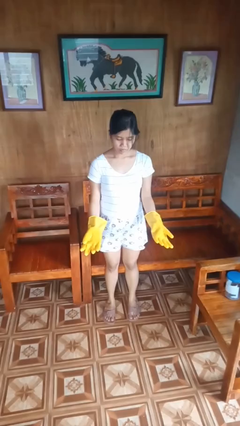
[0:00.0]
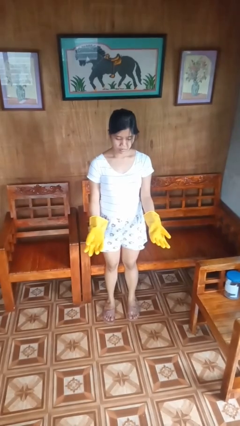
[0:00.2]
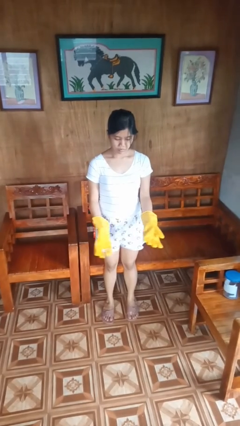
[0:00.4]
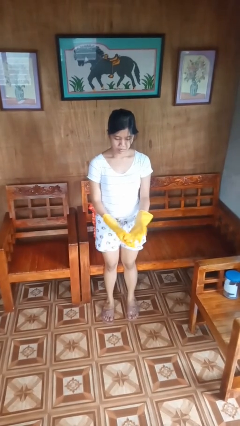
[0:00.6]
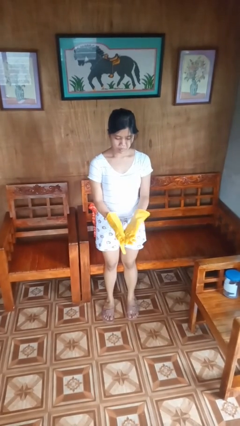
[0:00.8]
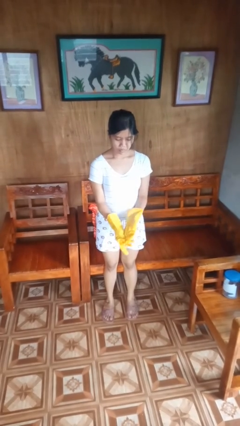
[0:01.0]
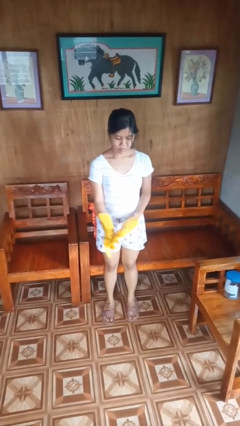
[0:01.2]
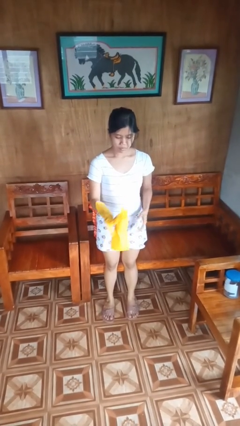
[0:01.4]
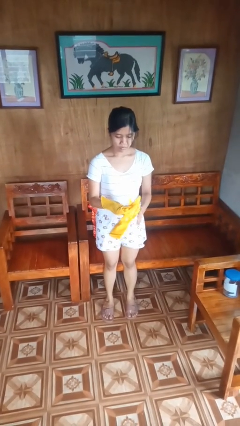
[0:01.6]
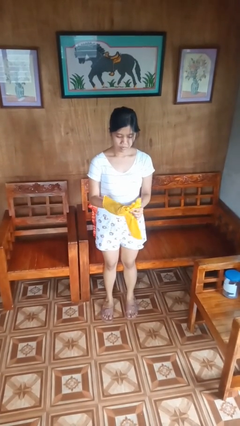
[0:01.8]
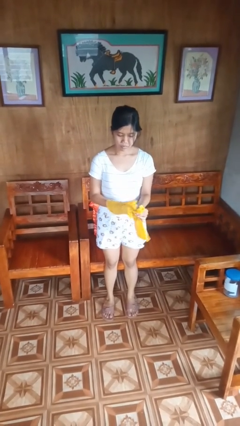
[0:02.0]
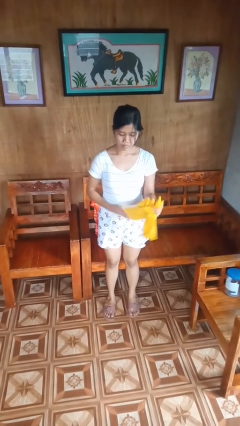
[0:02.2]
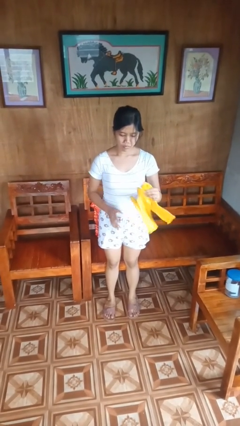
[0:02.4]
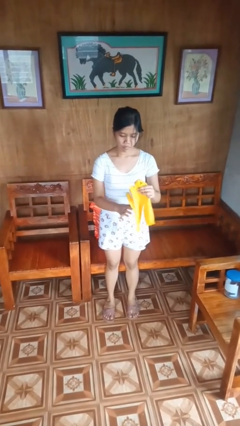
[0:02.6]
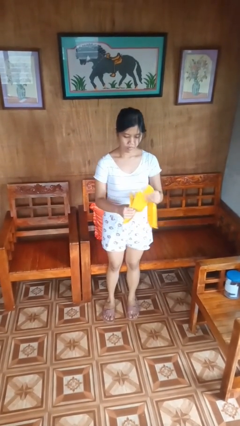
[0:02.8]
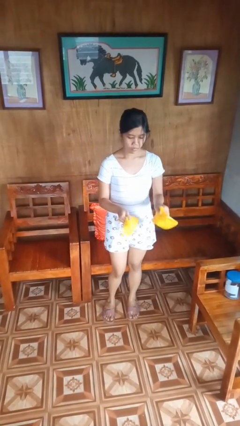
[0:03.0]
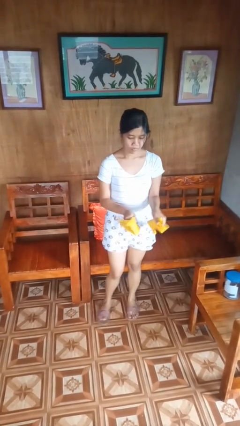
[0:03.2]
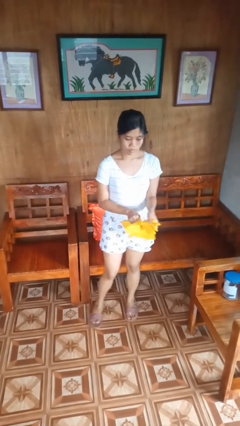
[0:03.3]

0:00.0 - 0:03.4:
person takes off gloves

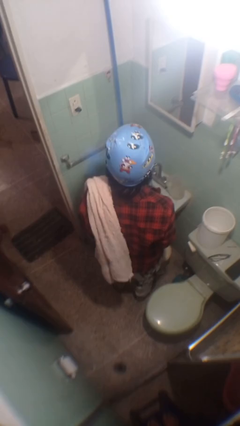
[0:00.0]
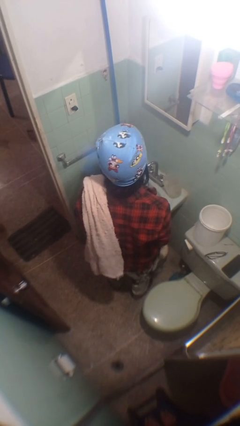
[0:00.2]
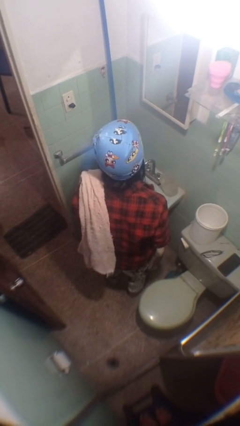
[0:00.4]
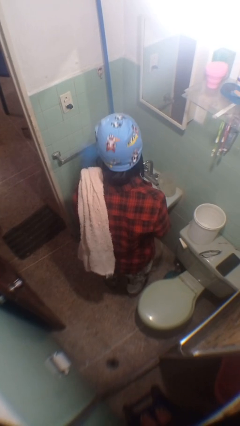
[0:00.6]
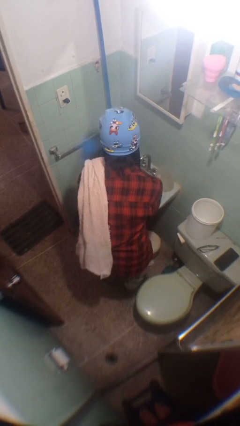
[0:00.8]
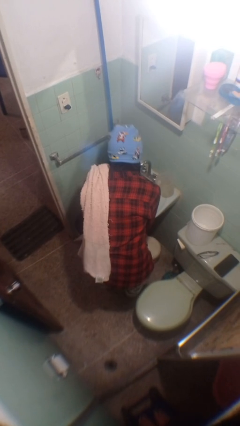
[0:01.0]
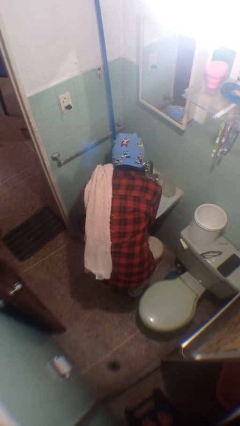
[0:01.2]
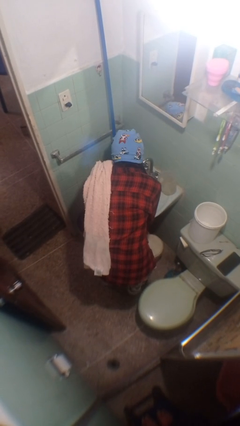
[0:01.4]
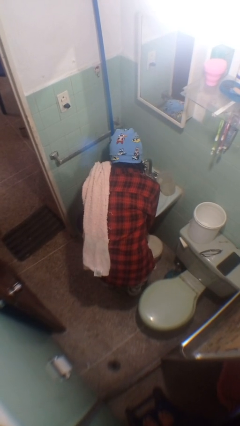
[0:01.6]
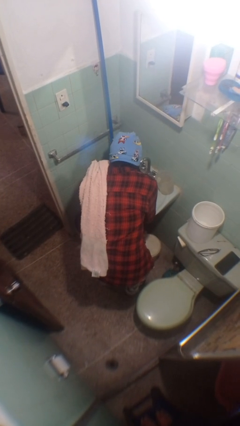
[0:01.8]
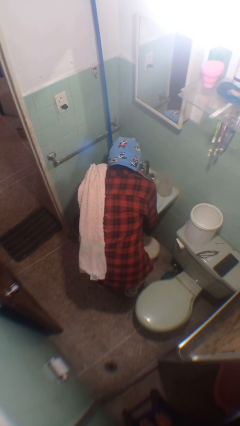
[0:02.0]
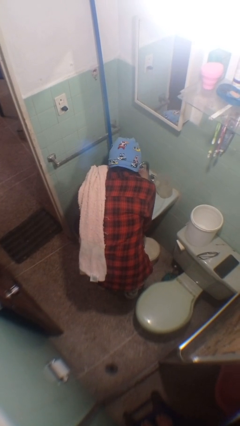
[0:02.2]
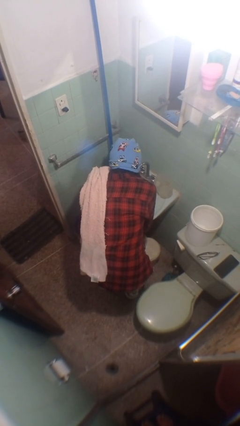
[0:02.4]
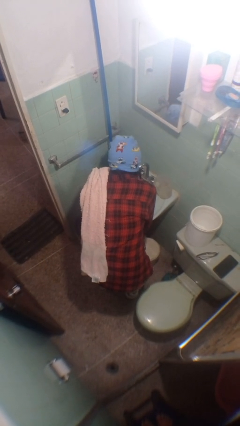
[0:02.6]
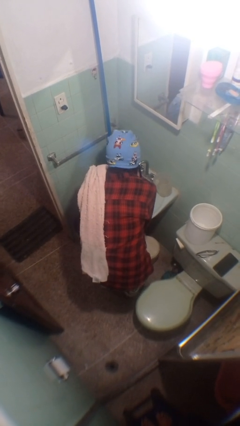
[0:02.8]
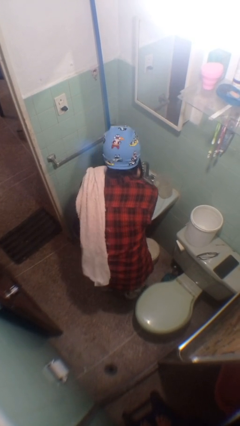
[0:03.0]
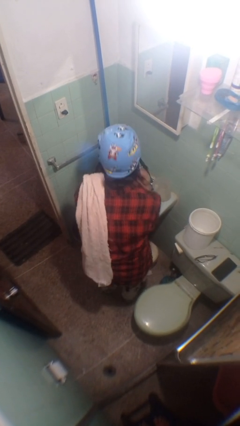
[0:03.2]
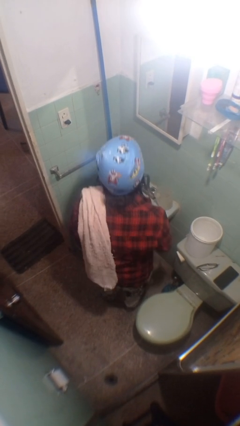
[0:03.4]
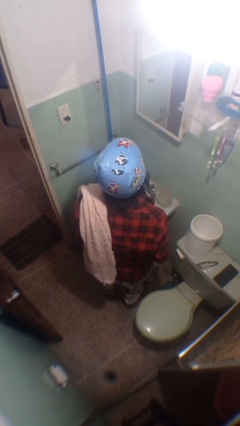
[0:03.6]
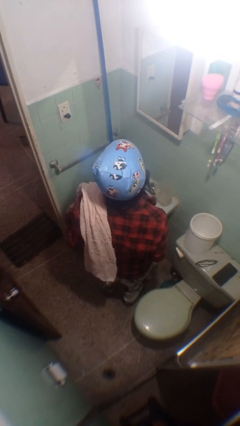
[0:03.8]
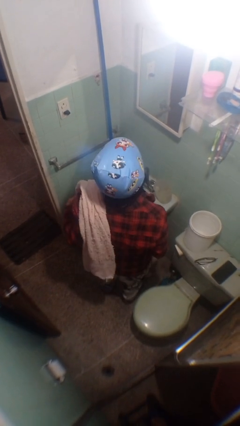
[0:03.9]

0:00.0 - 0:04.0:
person washes face

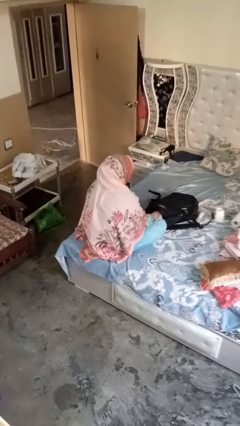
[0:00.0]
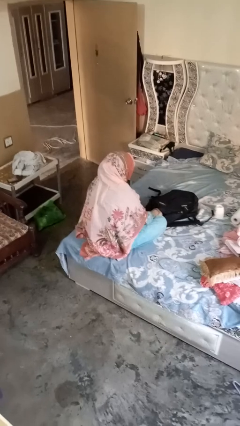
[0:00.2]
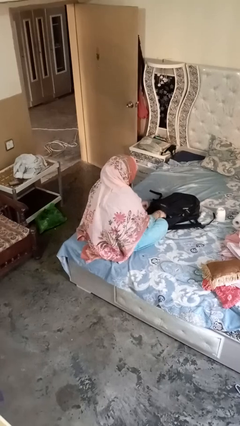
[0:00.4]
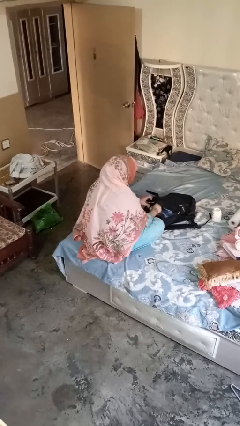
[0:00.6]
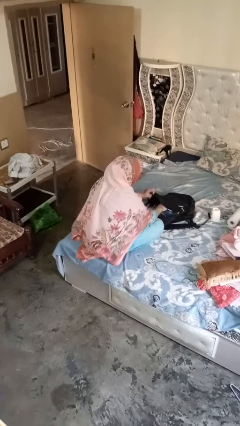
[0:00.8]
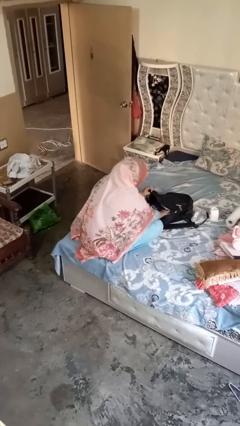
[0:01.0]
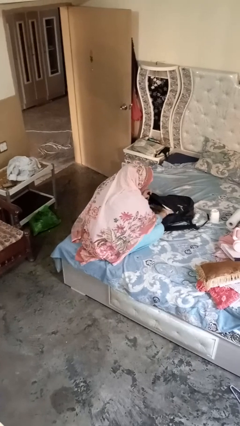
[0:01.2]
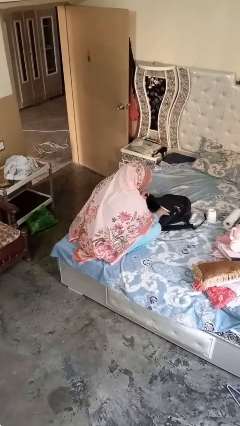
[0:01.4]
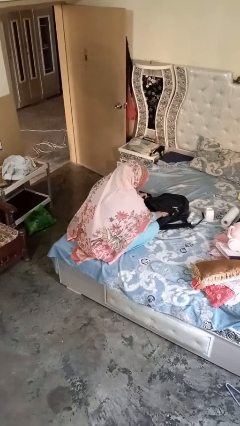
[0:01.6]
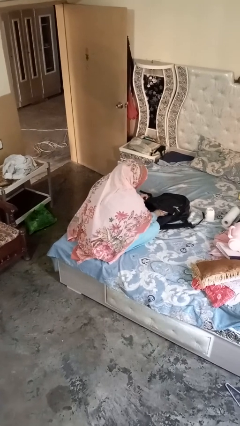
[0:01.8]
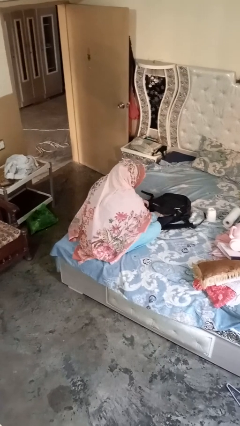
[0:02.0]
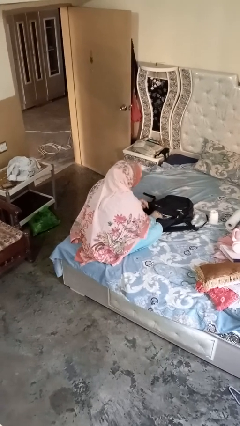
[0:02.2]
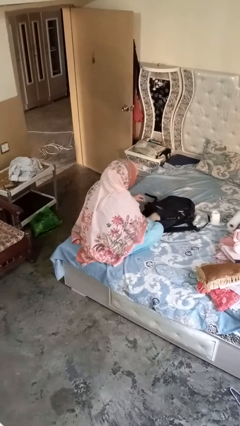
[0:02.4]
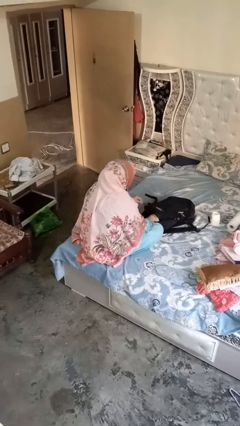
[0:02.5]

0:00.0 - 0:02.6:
person searches in bag

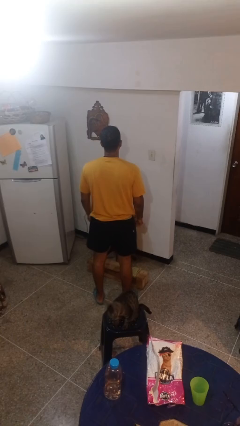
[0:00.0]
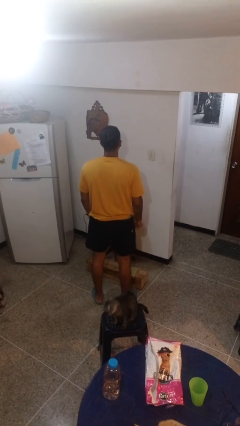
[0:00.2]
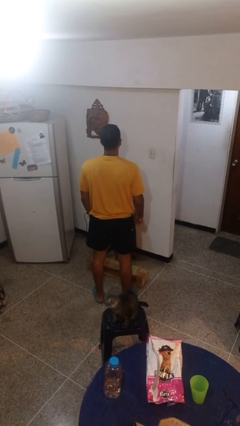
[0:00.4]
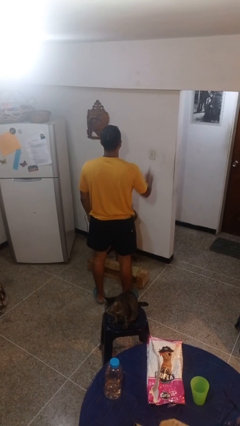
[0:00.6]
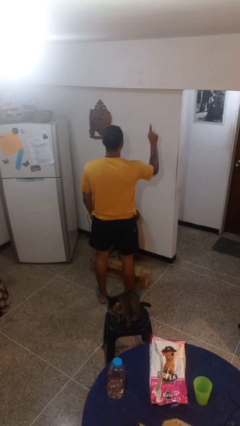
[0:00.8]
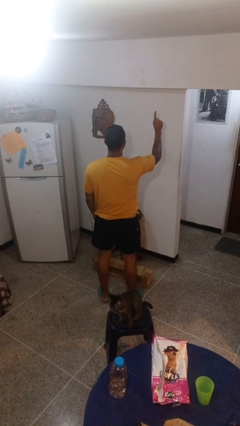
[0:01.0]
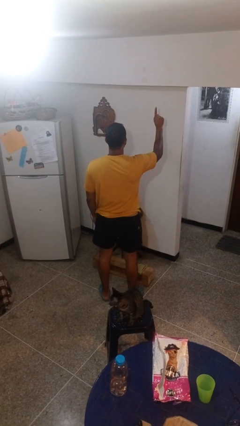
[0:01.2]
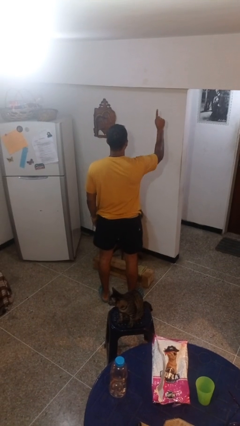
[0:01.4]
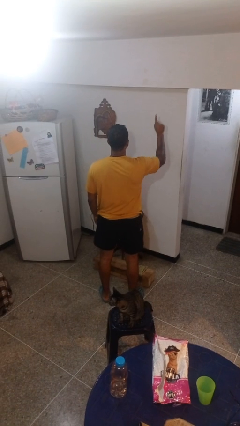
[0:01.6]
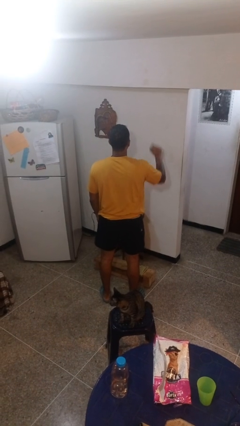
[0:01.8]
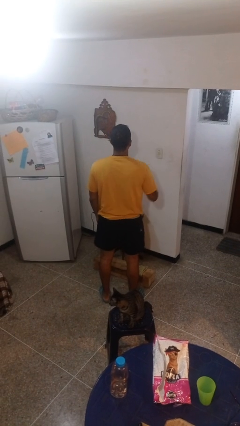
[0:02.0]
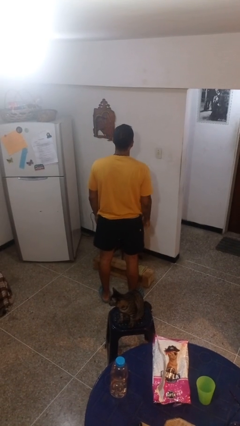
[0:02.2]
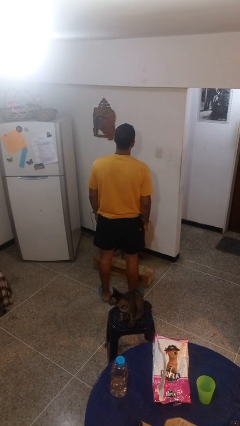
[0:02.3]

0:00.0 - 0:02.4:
person gestures number one

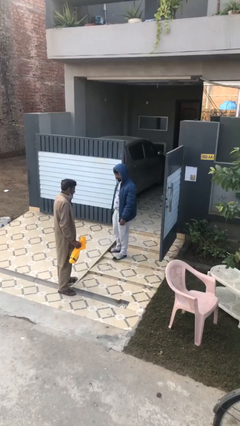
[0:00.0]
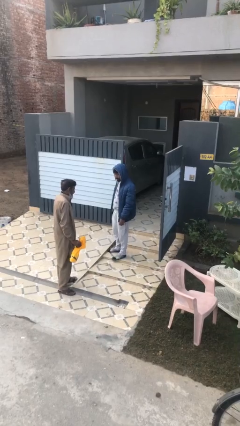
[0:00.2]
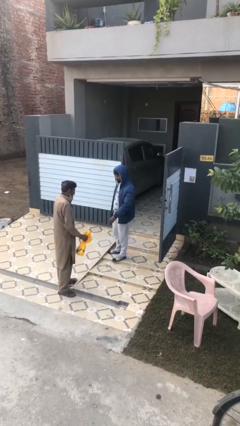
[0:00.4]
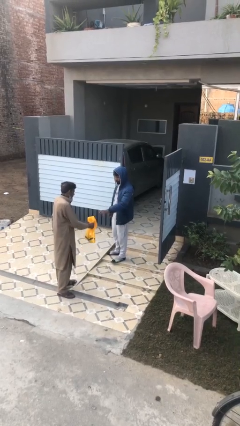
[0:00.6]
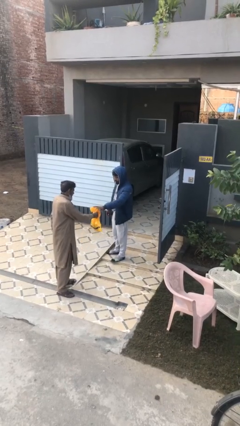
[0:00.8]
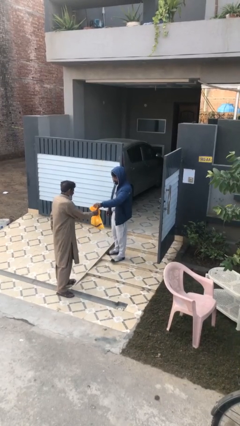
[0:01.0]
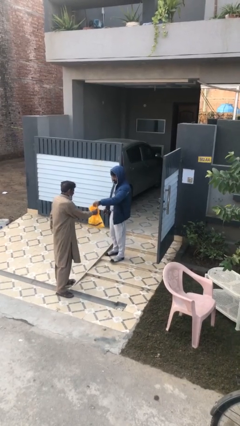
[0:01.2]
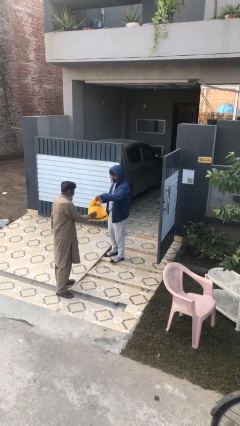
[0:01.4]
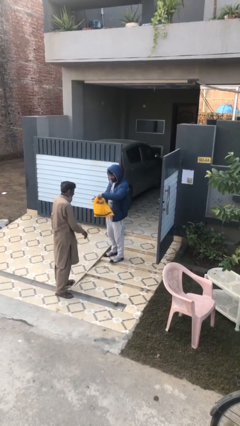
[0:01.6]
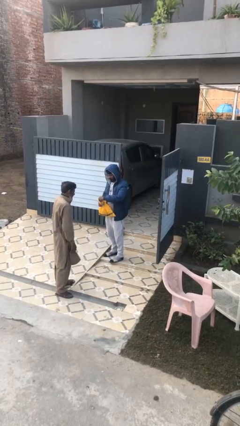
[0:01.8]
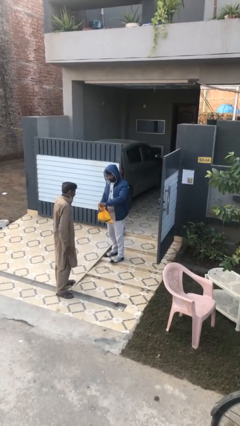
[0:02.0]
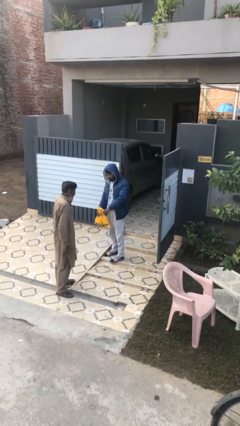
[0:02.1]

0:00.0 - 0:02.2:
person transfers object to person

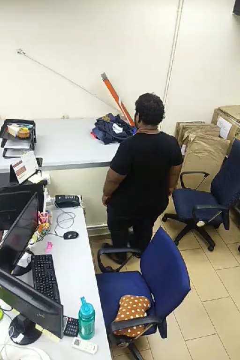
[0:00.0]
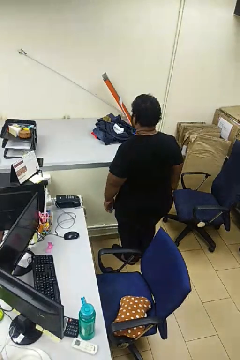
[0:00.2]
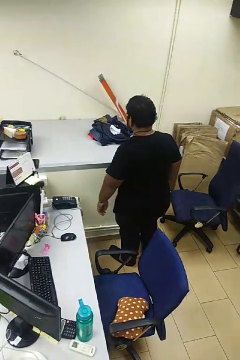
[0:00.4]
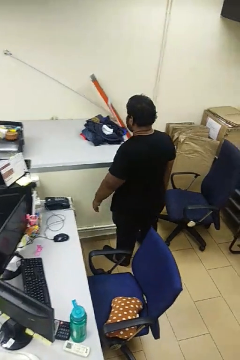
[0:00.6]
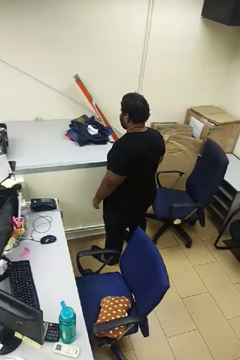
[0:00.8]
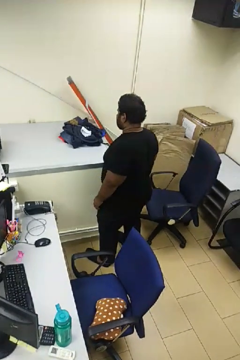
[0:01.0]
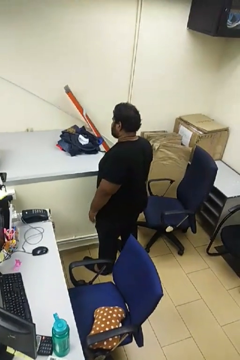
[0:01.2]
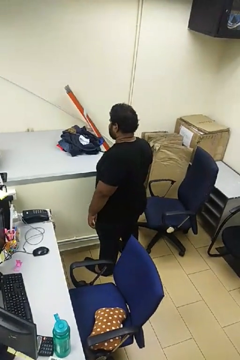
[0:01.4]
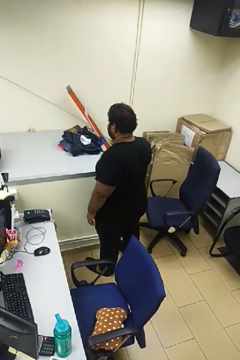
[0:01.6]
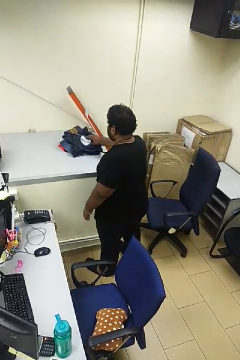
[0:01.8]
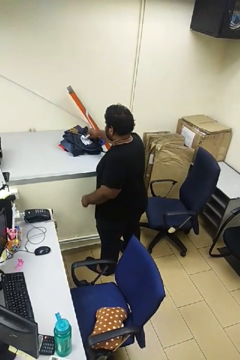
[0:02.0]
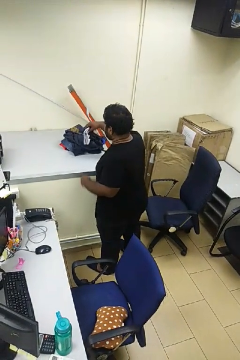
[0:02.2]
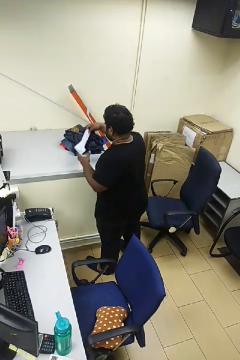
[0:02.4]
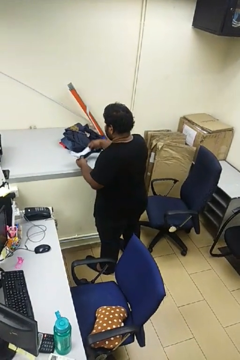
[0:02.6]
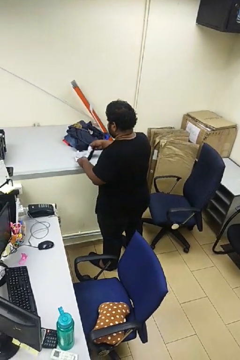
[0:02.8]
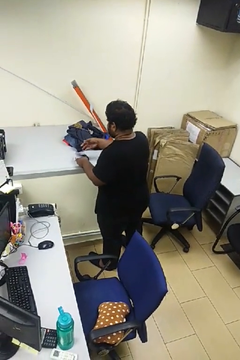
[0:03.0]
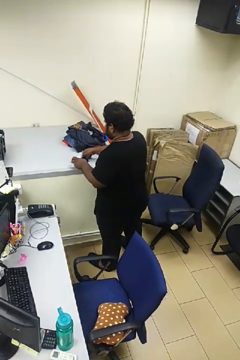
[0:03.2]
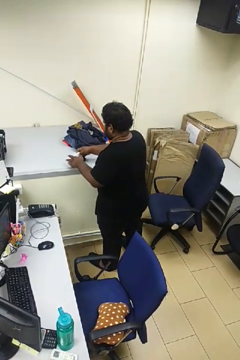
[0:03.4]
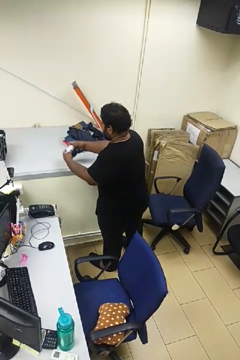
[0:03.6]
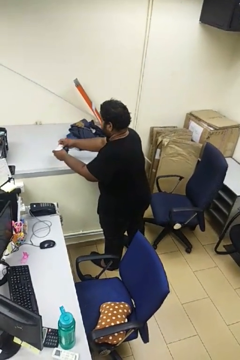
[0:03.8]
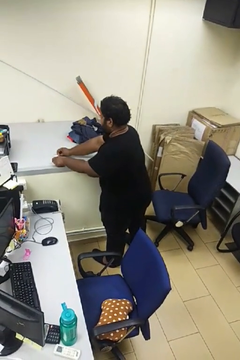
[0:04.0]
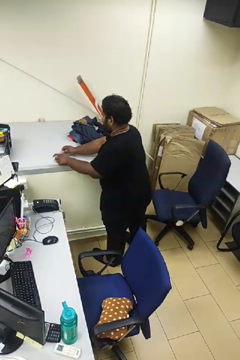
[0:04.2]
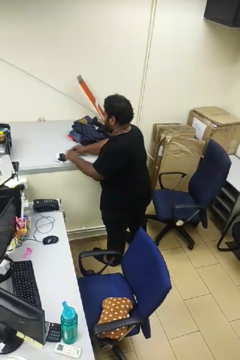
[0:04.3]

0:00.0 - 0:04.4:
person folds socks
